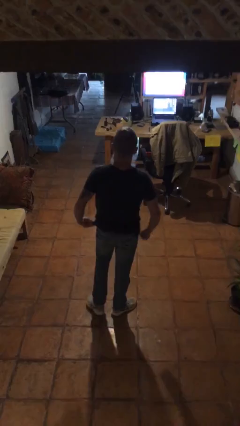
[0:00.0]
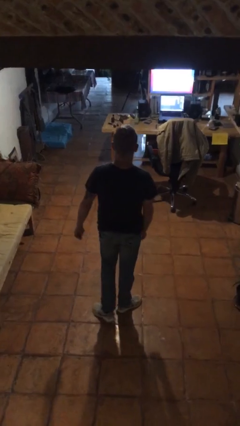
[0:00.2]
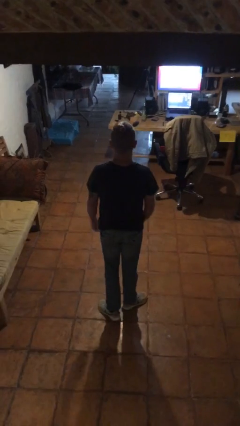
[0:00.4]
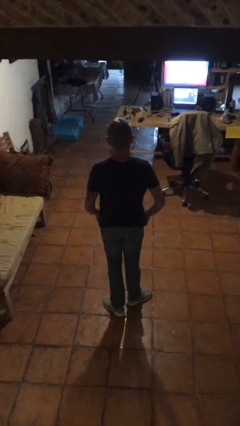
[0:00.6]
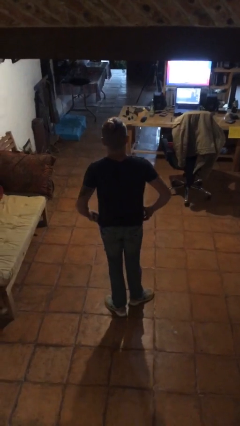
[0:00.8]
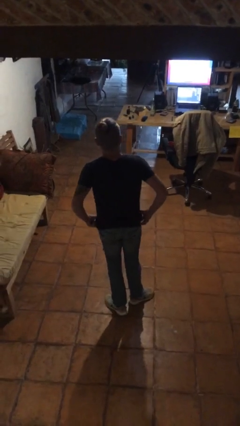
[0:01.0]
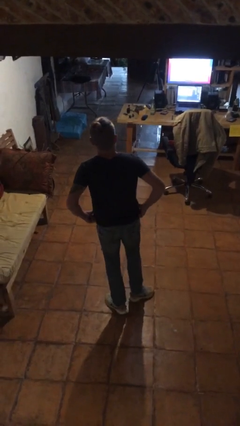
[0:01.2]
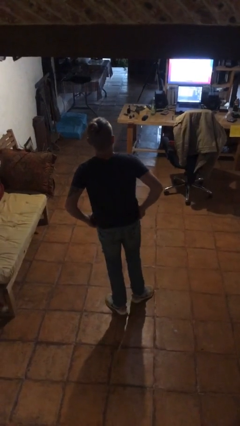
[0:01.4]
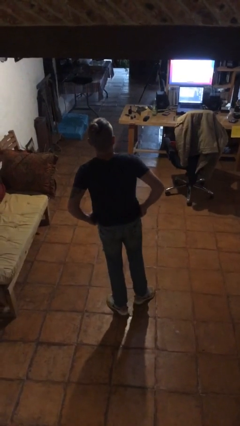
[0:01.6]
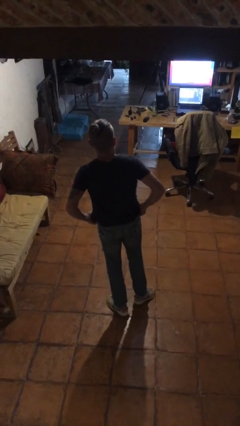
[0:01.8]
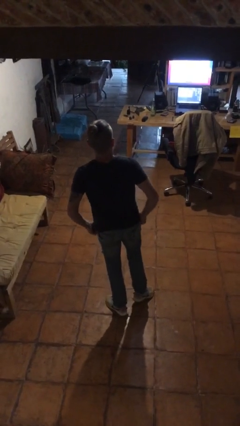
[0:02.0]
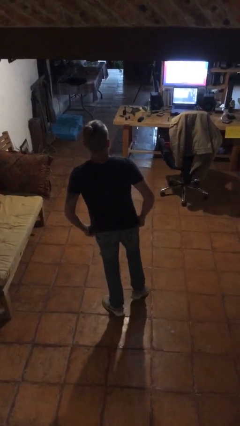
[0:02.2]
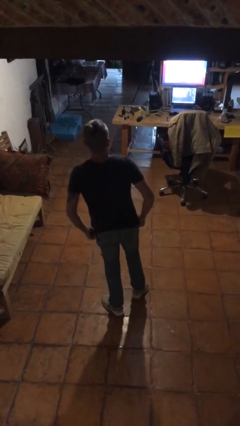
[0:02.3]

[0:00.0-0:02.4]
person hikes up pants

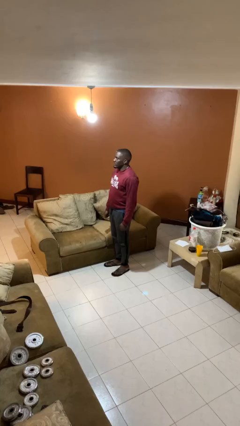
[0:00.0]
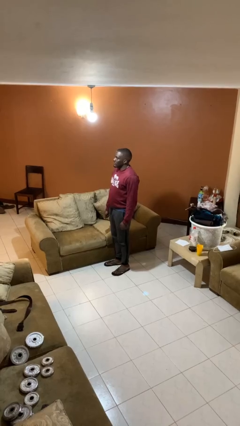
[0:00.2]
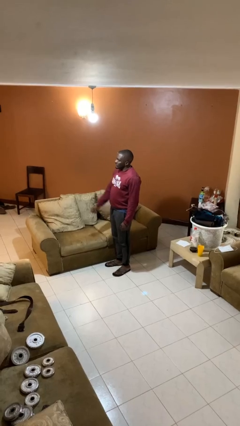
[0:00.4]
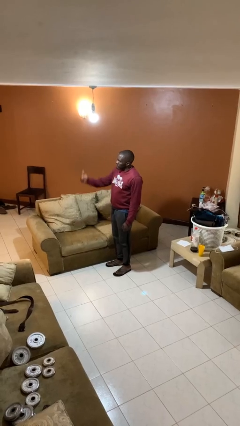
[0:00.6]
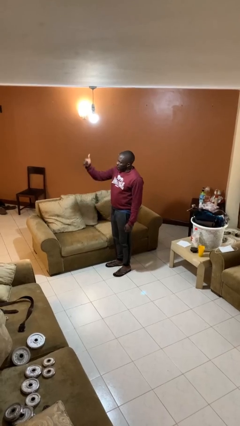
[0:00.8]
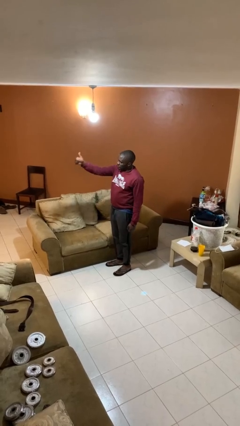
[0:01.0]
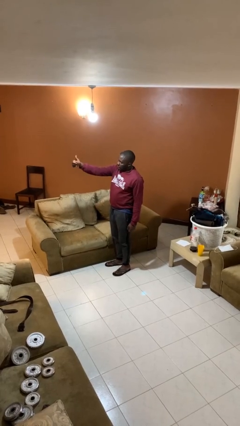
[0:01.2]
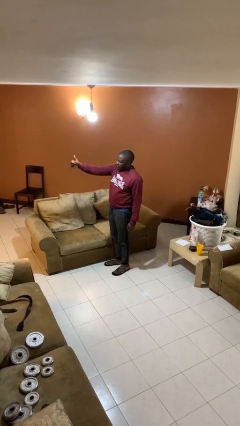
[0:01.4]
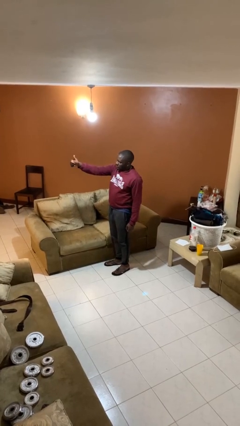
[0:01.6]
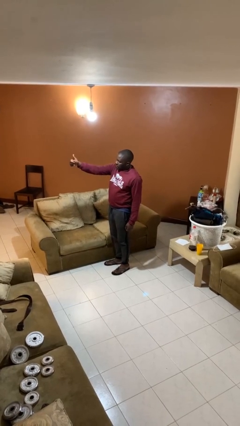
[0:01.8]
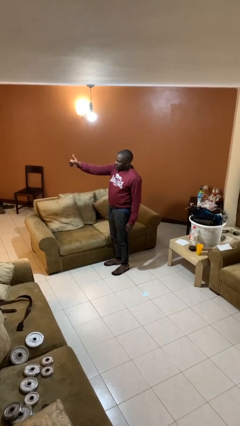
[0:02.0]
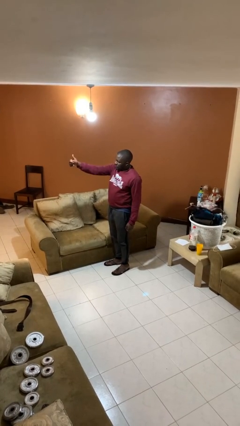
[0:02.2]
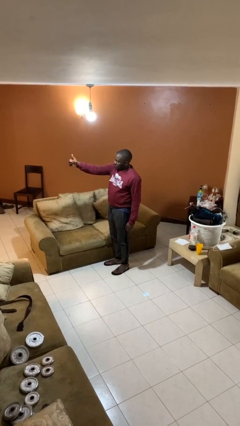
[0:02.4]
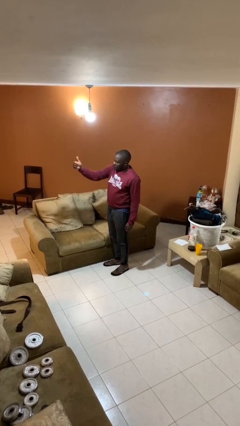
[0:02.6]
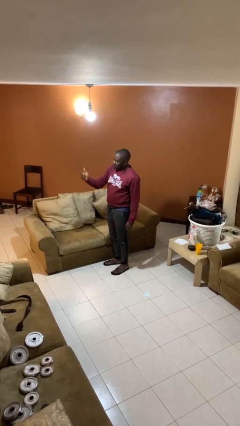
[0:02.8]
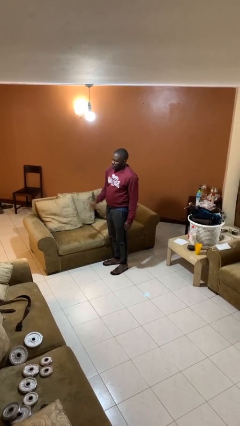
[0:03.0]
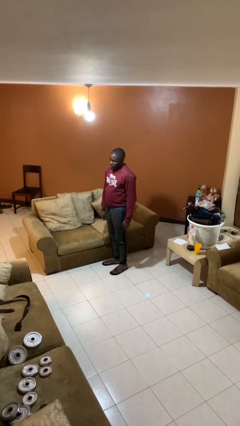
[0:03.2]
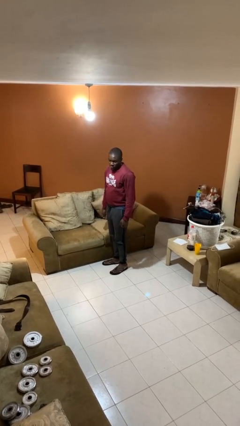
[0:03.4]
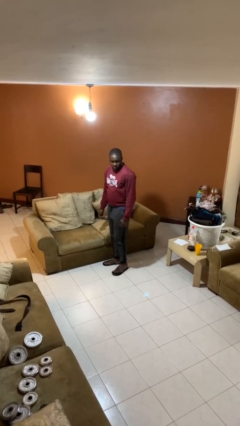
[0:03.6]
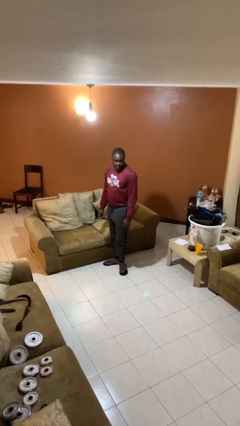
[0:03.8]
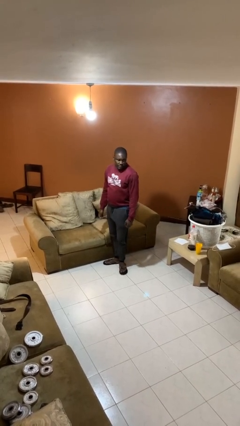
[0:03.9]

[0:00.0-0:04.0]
person gestures thumbs up

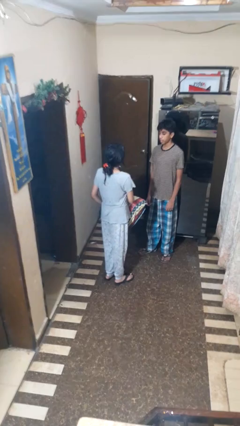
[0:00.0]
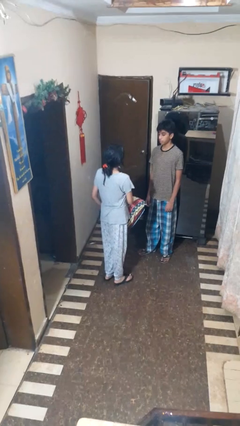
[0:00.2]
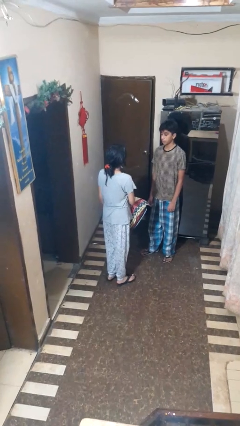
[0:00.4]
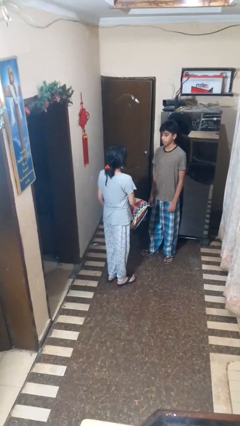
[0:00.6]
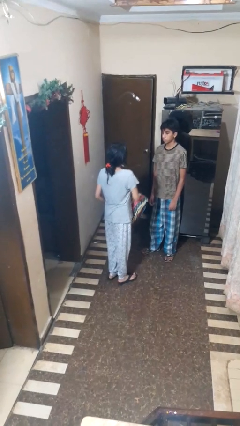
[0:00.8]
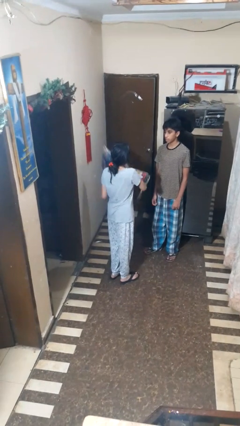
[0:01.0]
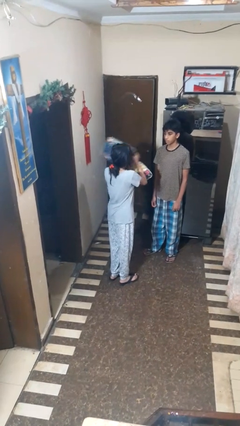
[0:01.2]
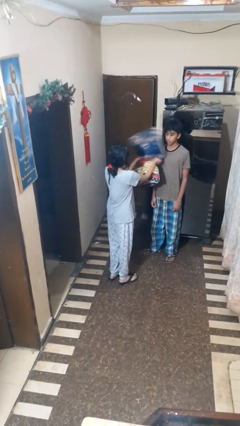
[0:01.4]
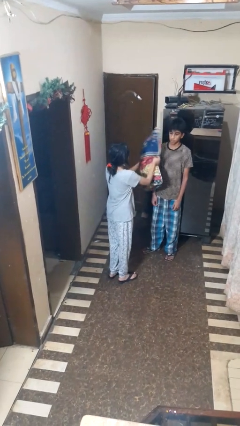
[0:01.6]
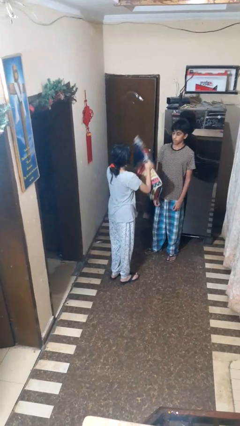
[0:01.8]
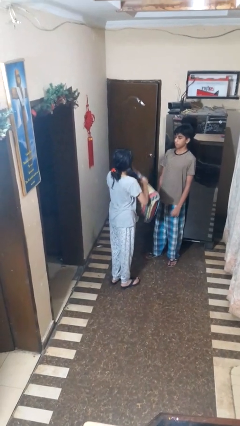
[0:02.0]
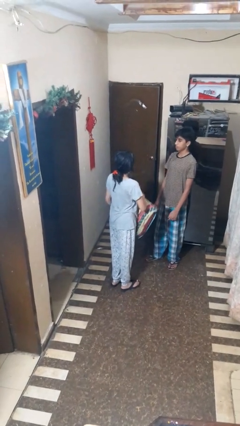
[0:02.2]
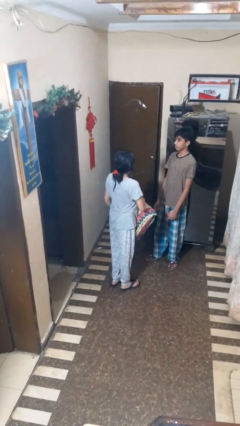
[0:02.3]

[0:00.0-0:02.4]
person hits person with pillow

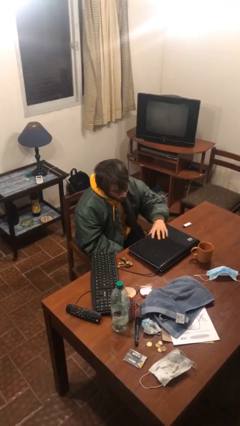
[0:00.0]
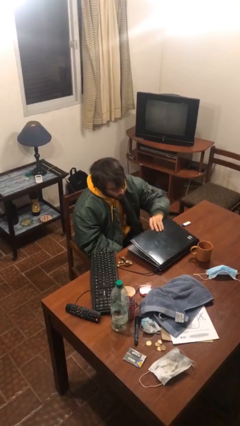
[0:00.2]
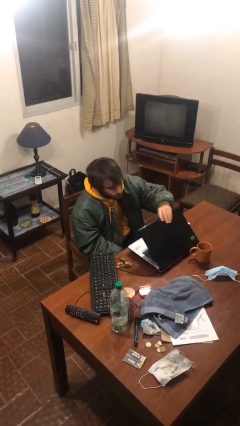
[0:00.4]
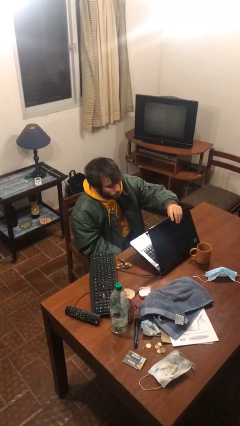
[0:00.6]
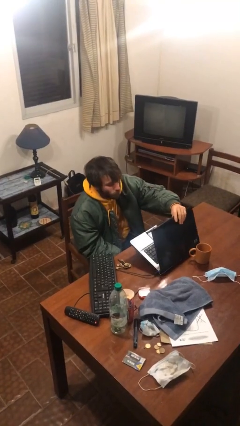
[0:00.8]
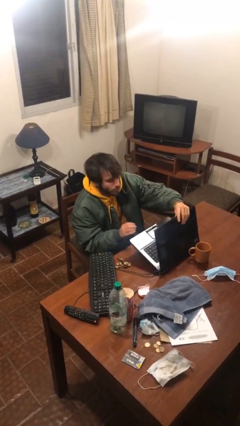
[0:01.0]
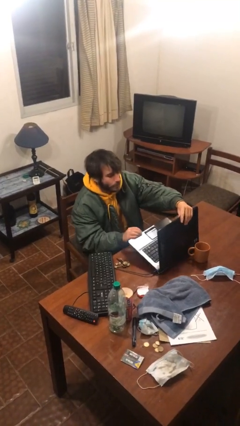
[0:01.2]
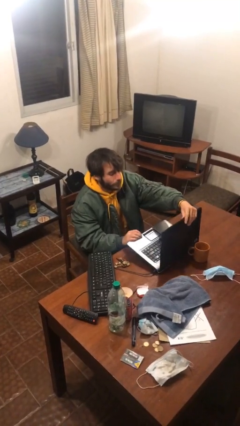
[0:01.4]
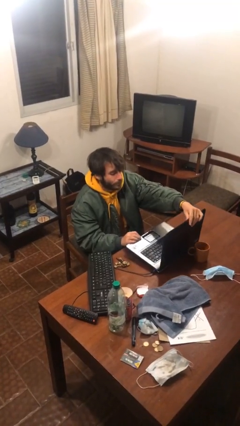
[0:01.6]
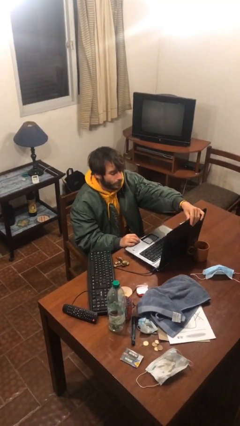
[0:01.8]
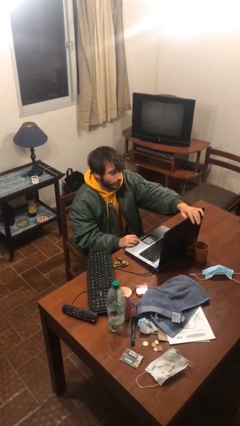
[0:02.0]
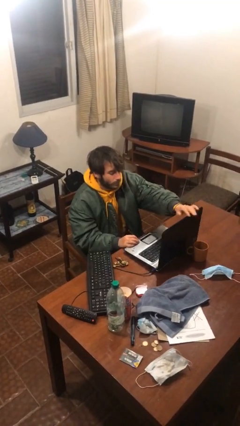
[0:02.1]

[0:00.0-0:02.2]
person interacts with laptop

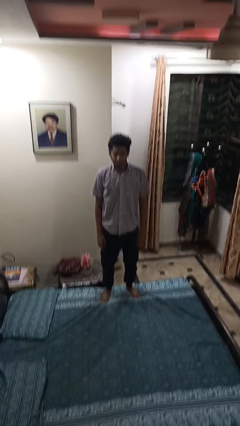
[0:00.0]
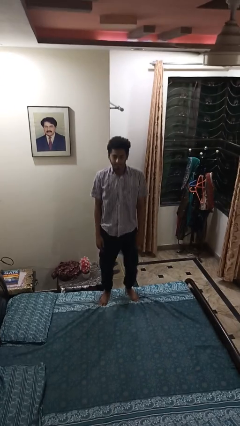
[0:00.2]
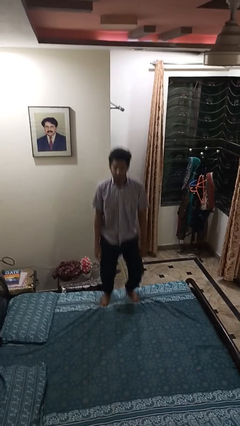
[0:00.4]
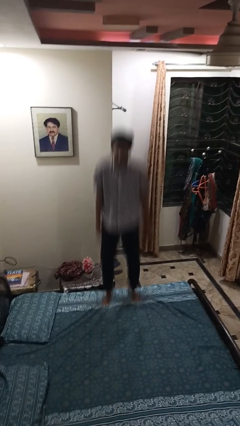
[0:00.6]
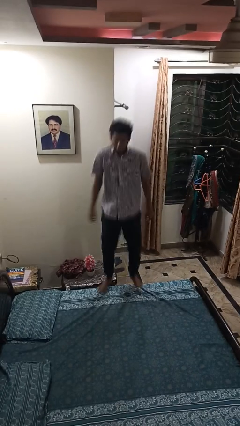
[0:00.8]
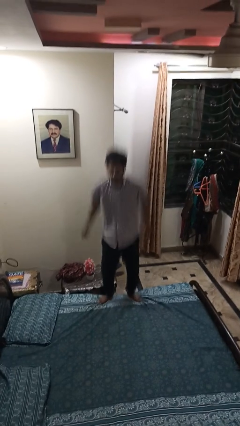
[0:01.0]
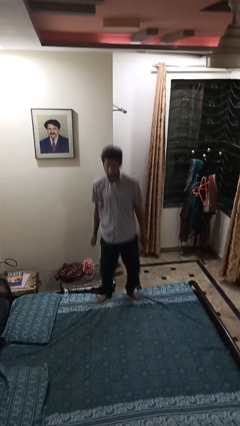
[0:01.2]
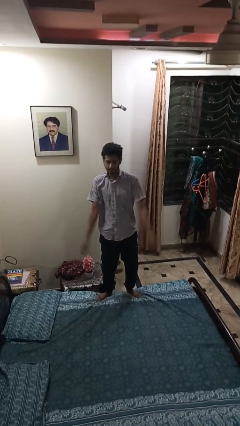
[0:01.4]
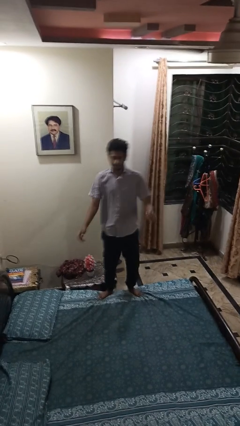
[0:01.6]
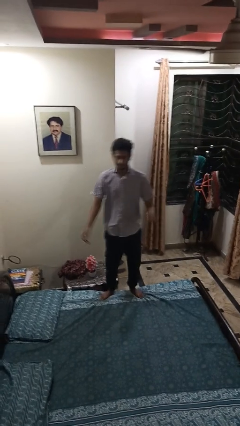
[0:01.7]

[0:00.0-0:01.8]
person jumps on bed

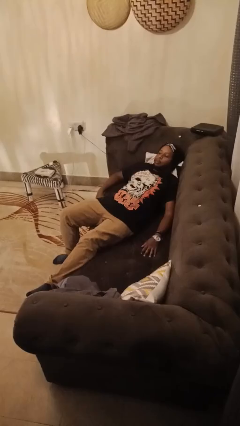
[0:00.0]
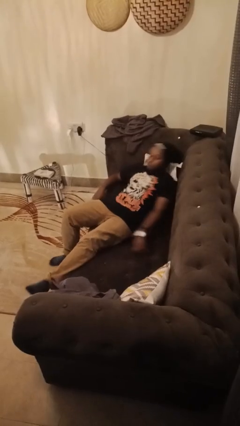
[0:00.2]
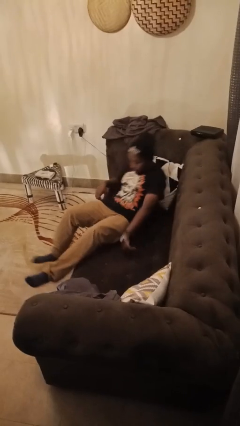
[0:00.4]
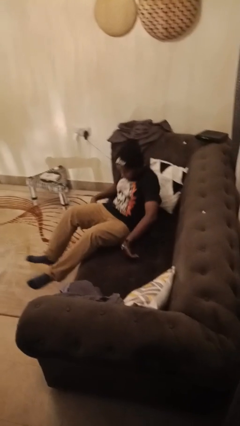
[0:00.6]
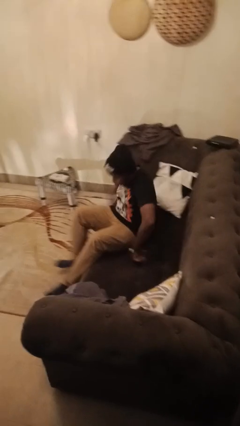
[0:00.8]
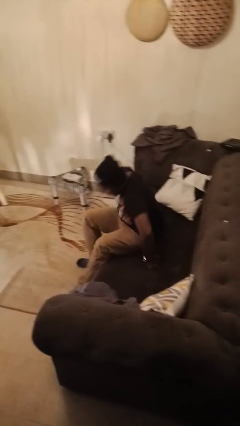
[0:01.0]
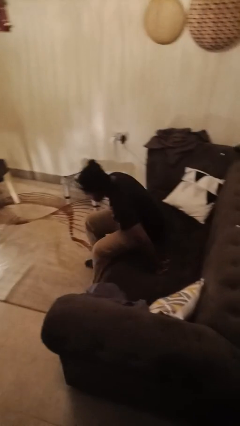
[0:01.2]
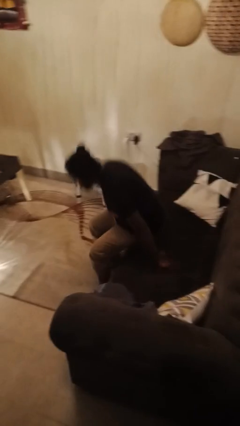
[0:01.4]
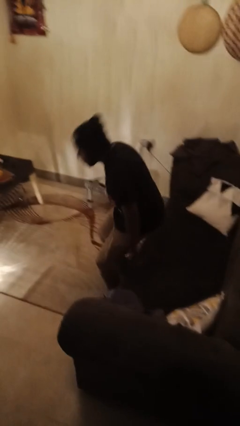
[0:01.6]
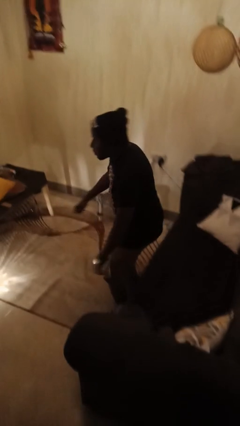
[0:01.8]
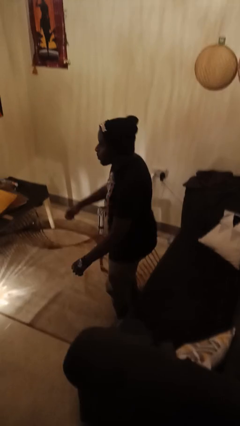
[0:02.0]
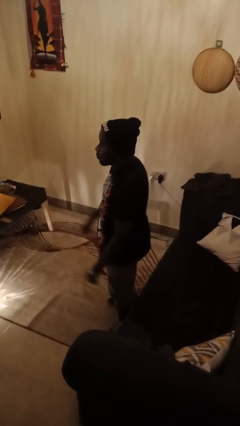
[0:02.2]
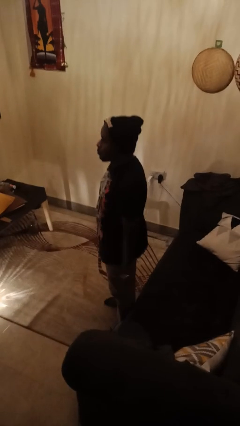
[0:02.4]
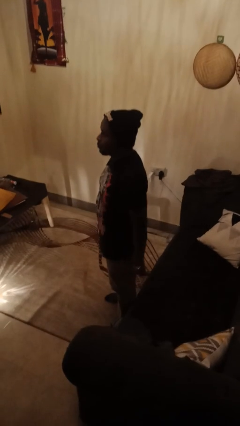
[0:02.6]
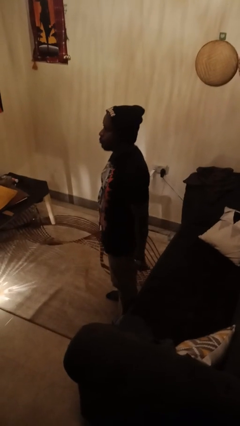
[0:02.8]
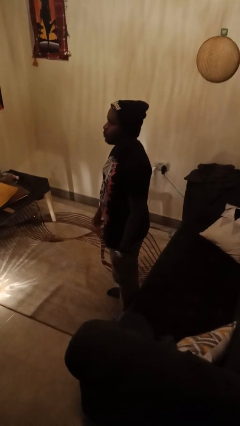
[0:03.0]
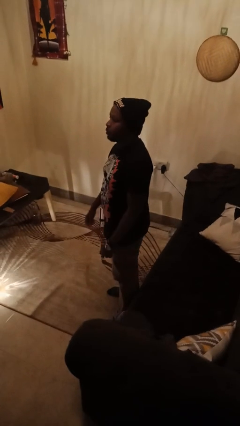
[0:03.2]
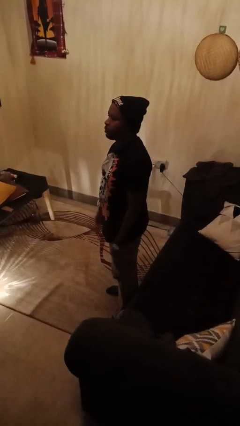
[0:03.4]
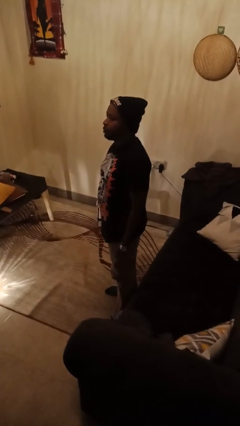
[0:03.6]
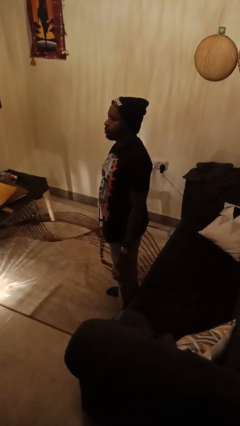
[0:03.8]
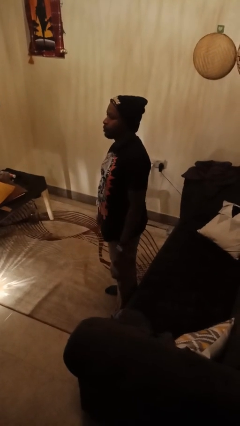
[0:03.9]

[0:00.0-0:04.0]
person stands up

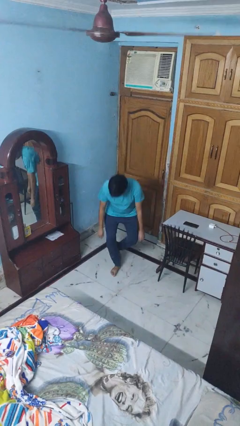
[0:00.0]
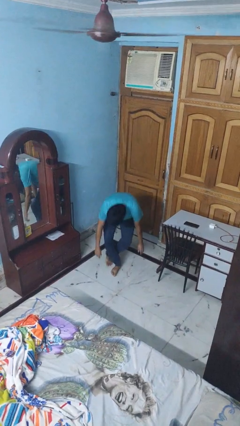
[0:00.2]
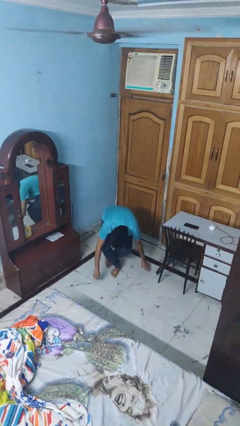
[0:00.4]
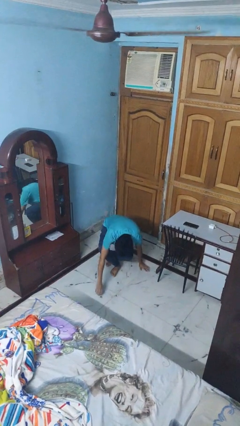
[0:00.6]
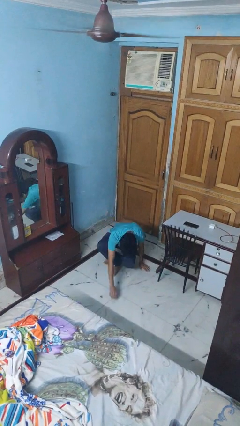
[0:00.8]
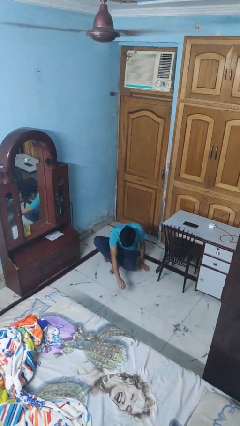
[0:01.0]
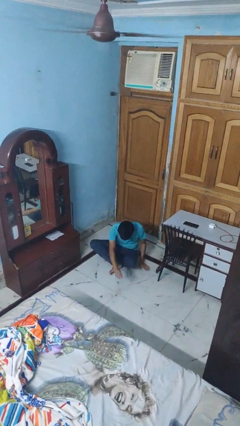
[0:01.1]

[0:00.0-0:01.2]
person sits crisscross
